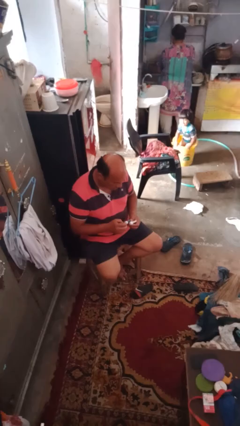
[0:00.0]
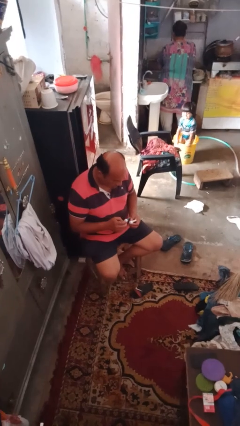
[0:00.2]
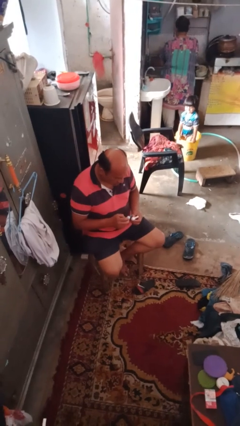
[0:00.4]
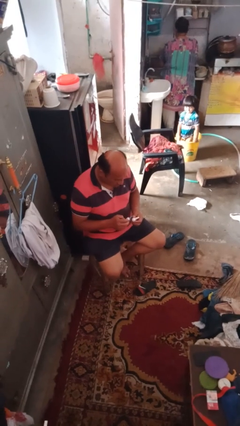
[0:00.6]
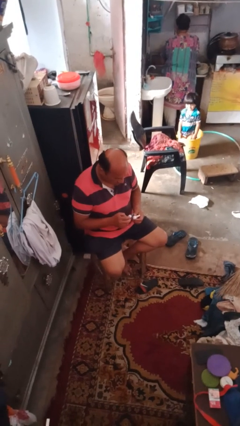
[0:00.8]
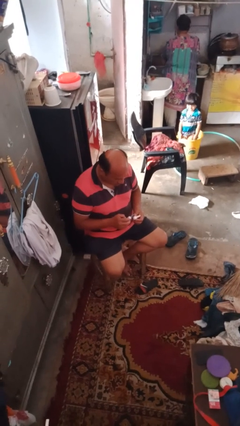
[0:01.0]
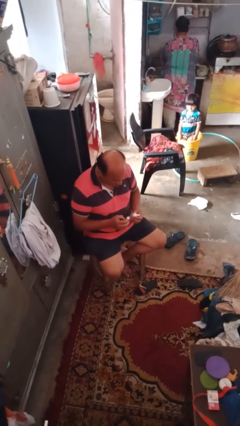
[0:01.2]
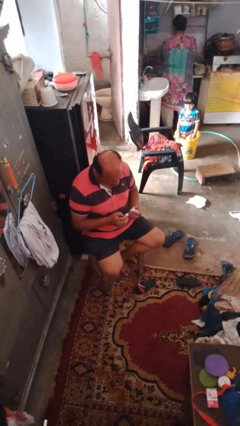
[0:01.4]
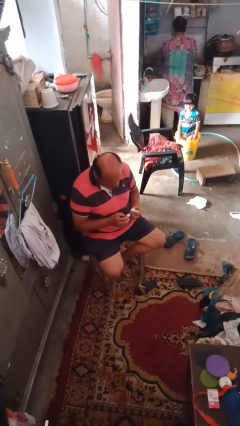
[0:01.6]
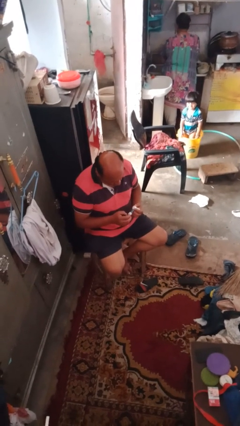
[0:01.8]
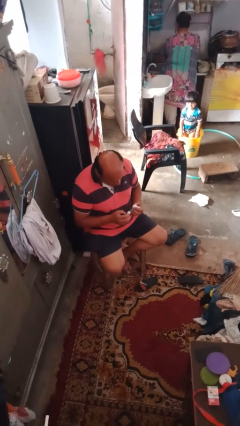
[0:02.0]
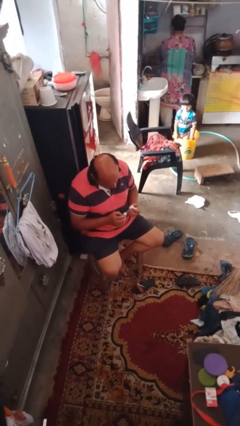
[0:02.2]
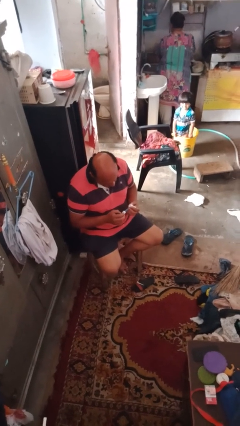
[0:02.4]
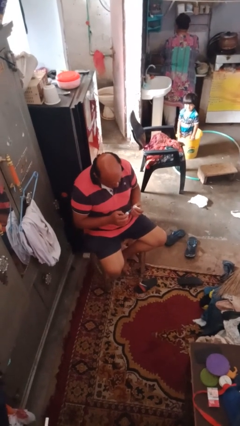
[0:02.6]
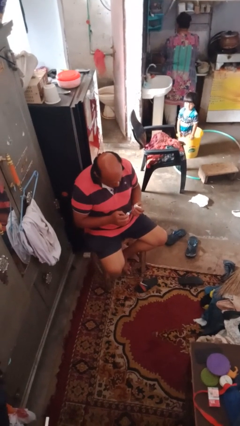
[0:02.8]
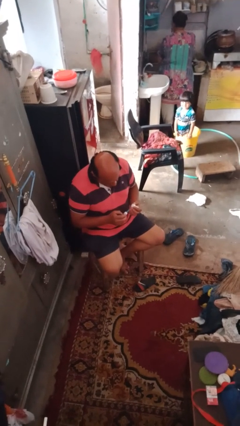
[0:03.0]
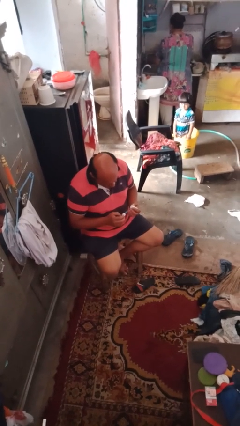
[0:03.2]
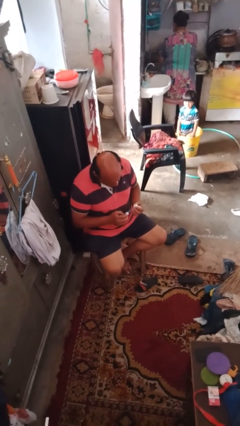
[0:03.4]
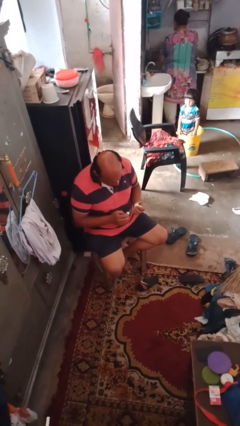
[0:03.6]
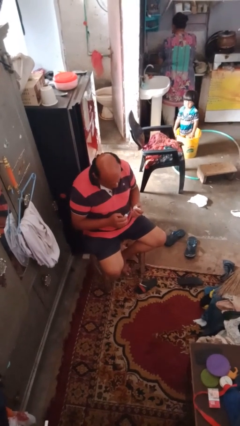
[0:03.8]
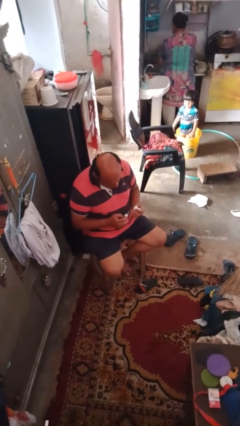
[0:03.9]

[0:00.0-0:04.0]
person paints fingernails

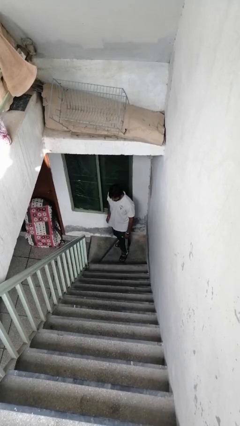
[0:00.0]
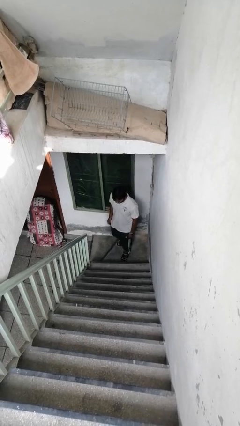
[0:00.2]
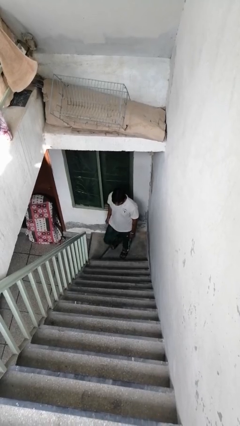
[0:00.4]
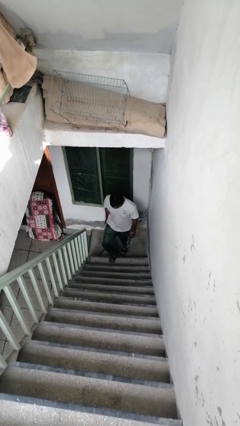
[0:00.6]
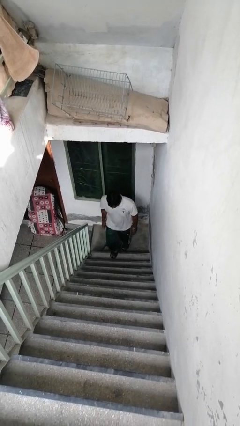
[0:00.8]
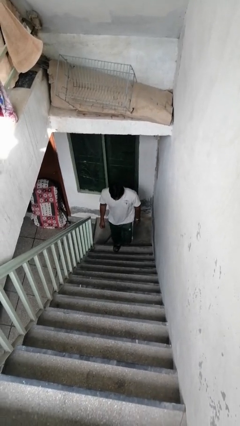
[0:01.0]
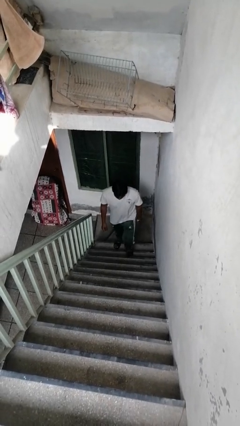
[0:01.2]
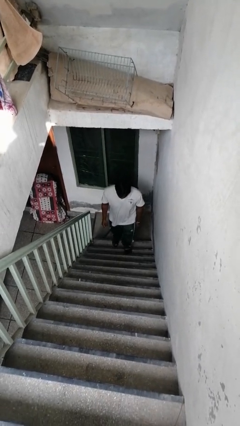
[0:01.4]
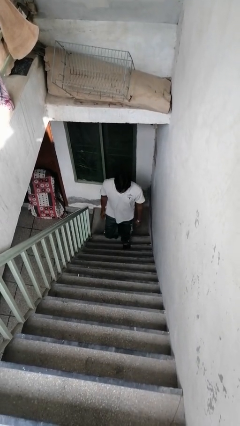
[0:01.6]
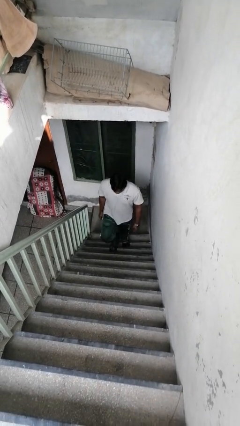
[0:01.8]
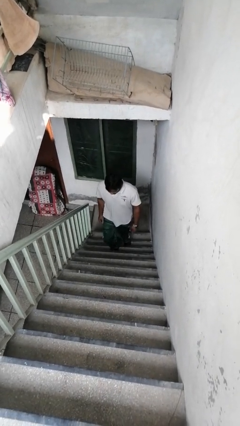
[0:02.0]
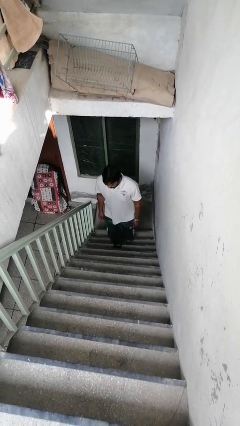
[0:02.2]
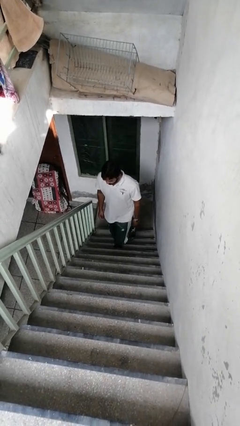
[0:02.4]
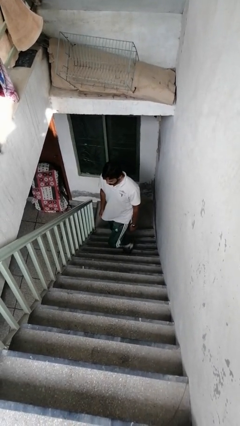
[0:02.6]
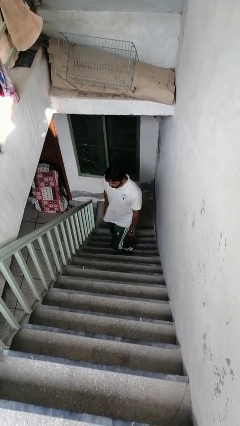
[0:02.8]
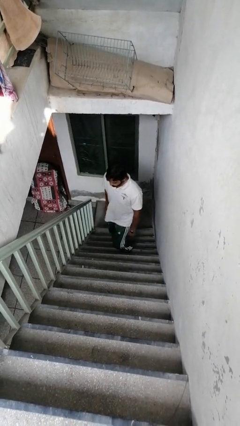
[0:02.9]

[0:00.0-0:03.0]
person climbs up stairs

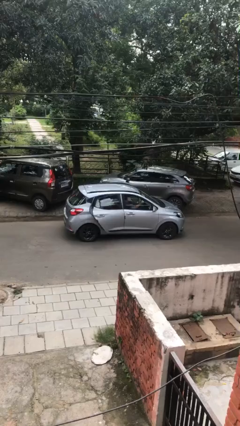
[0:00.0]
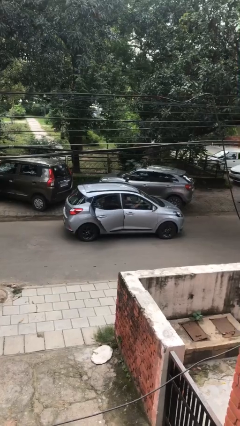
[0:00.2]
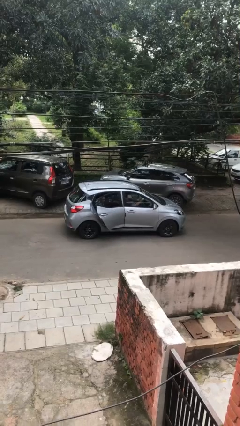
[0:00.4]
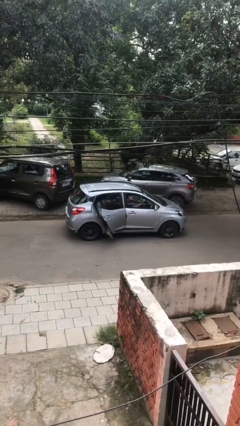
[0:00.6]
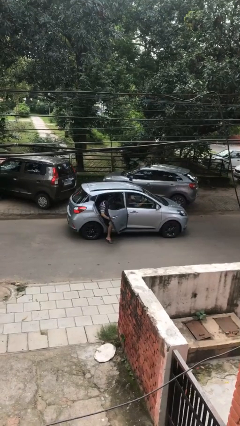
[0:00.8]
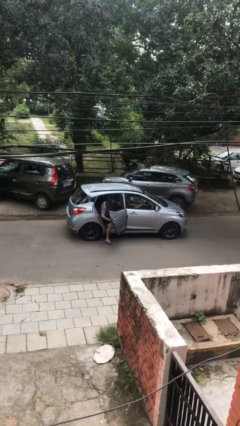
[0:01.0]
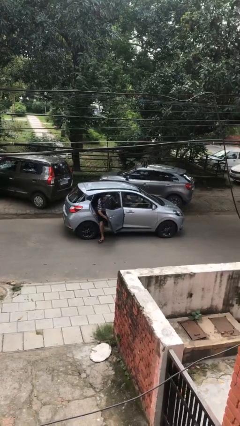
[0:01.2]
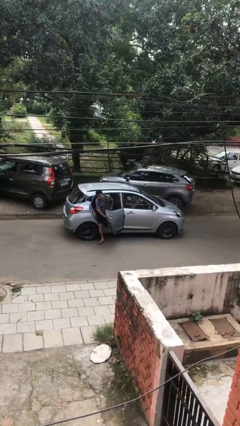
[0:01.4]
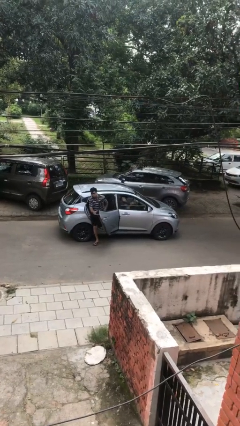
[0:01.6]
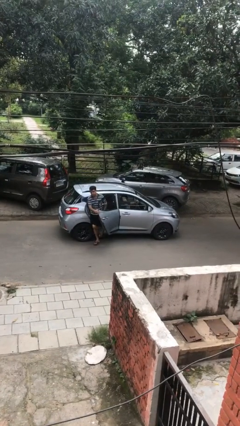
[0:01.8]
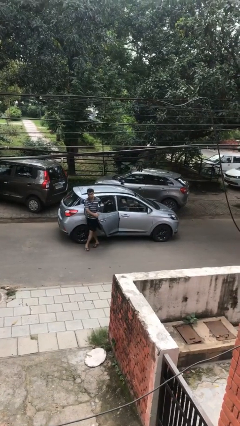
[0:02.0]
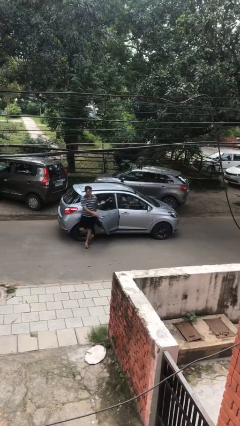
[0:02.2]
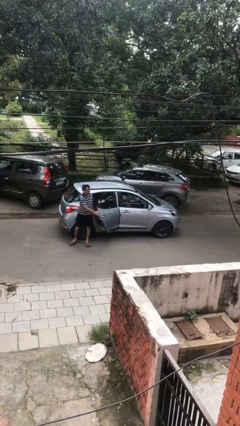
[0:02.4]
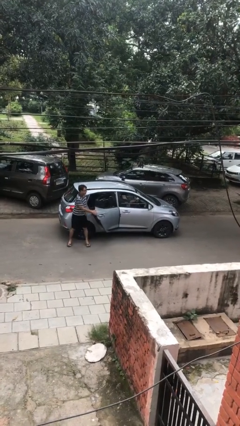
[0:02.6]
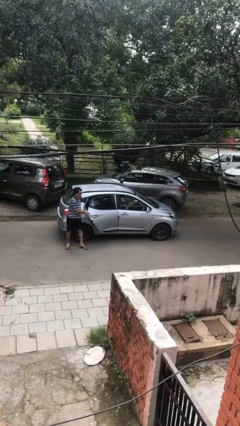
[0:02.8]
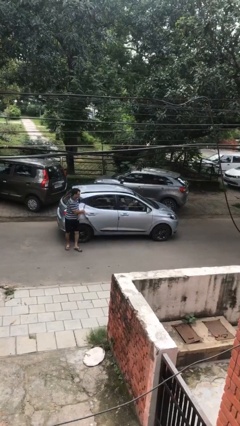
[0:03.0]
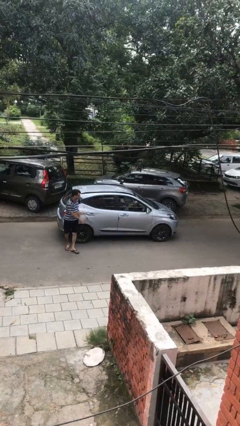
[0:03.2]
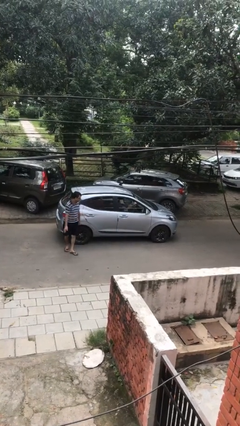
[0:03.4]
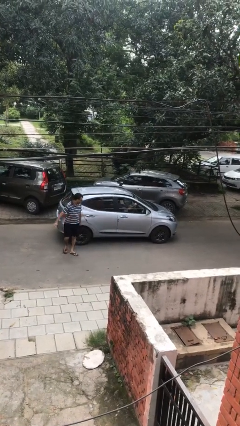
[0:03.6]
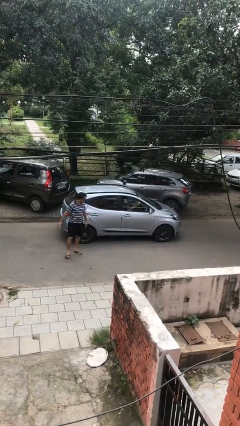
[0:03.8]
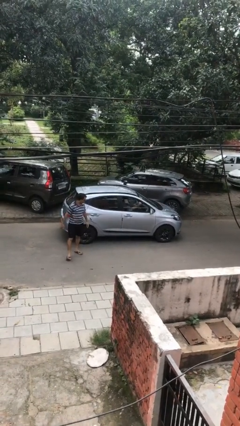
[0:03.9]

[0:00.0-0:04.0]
car drops off person

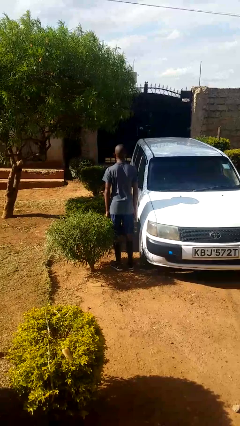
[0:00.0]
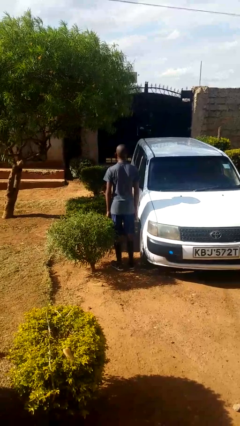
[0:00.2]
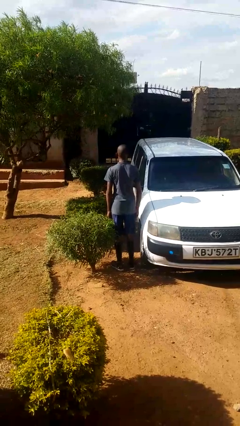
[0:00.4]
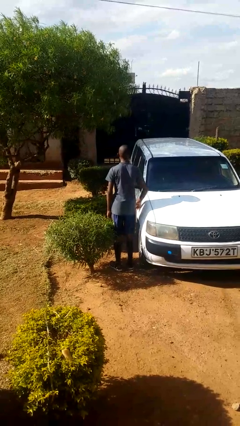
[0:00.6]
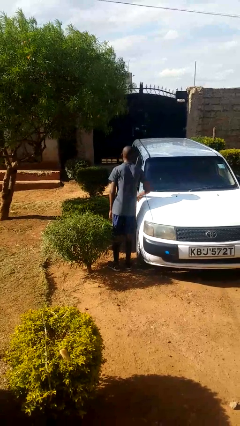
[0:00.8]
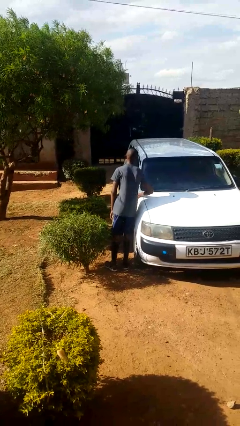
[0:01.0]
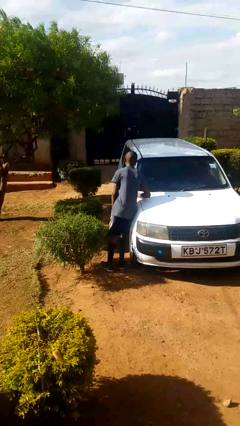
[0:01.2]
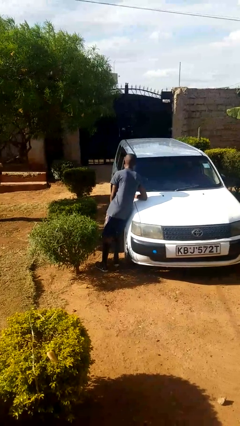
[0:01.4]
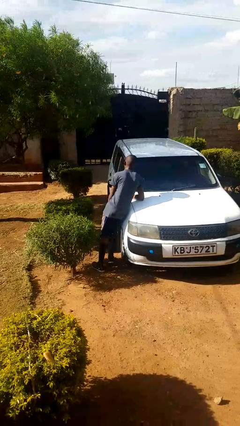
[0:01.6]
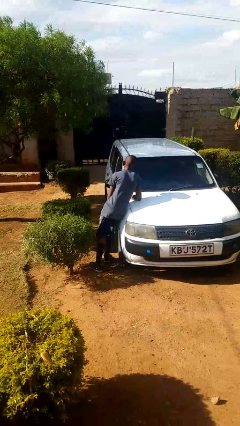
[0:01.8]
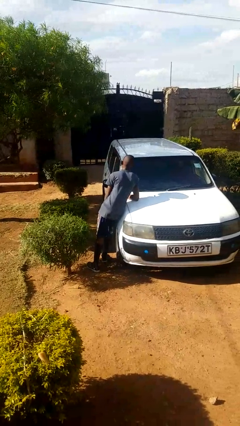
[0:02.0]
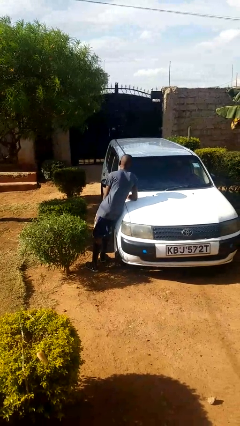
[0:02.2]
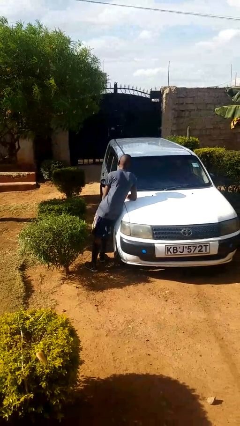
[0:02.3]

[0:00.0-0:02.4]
person leans against car

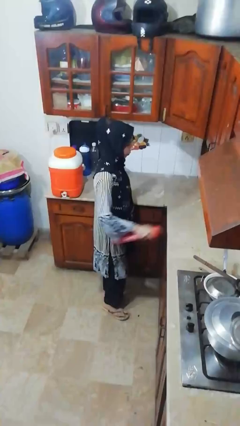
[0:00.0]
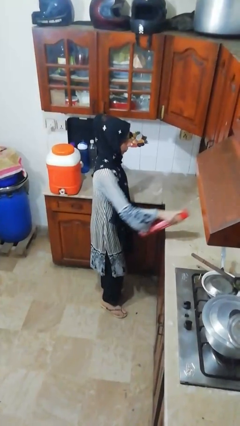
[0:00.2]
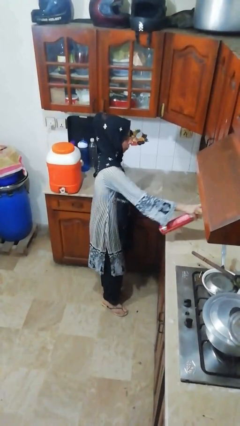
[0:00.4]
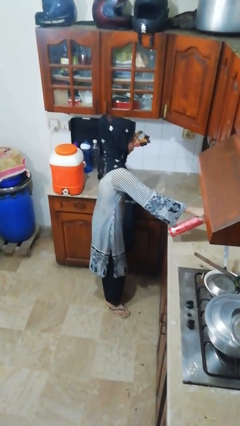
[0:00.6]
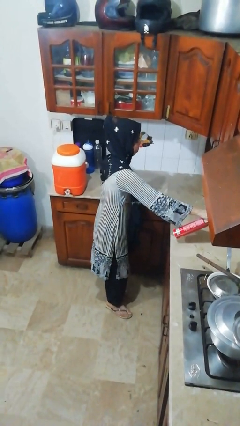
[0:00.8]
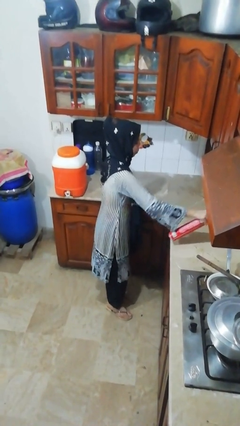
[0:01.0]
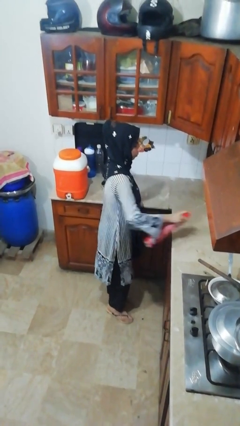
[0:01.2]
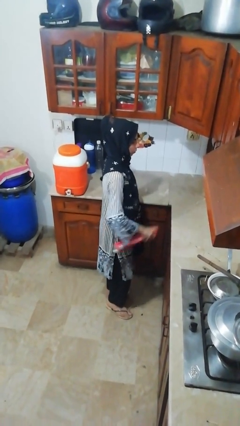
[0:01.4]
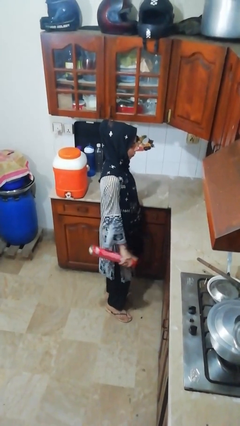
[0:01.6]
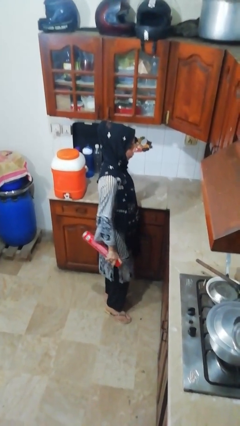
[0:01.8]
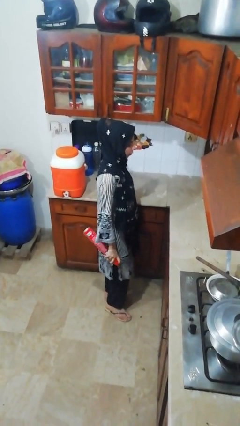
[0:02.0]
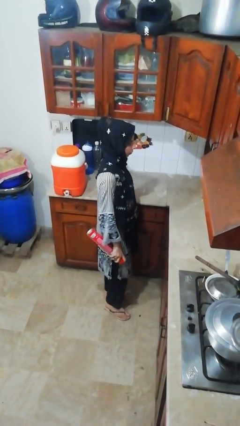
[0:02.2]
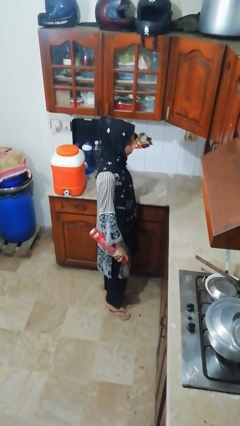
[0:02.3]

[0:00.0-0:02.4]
person sprays from bottle

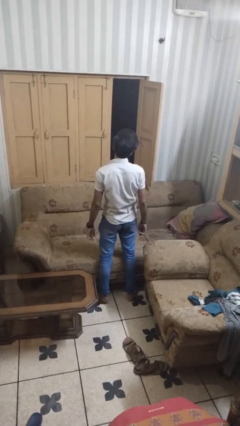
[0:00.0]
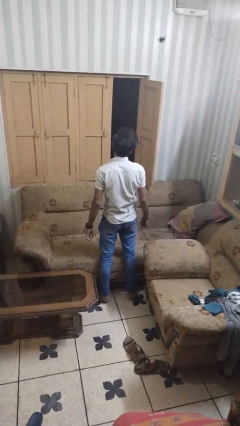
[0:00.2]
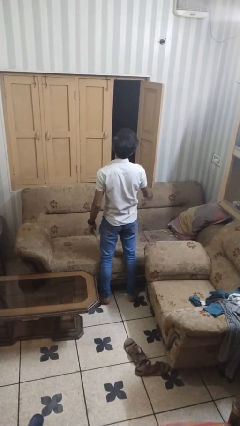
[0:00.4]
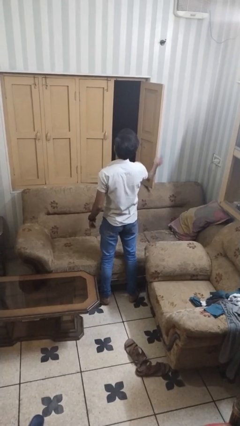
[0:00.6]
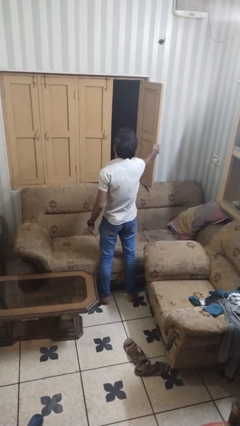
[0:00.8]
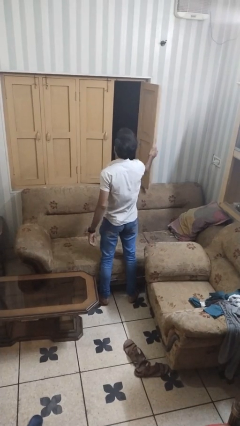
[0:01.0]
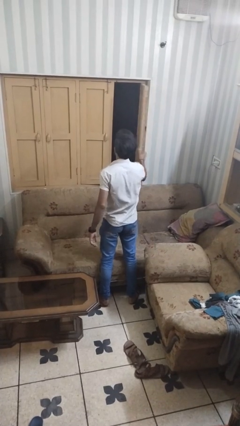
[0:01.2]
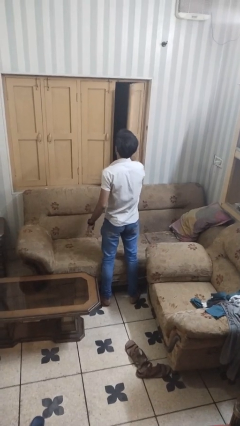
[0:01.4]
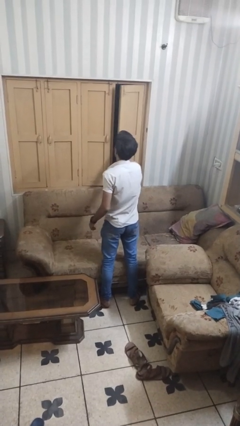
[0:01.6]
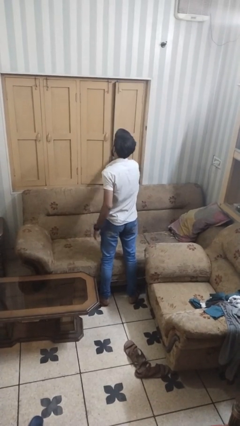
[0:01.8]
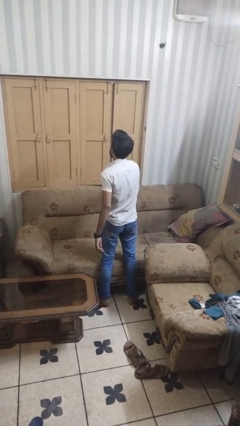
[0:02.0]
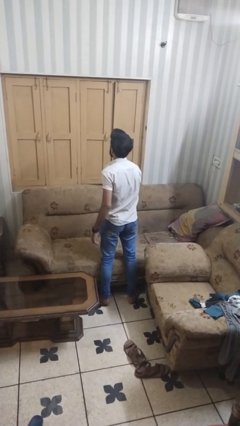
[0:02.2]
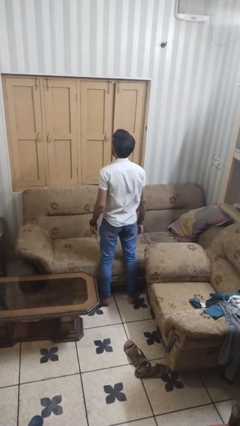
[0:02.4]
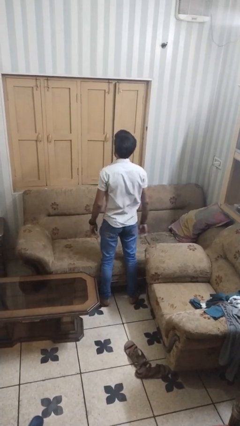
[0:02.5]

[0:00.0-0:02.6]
person closes home window
